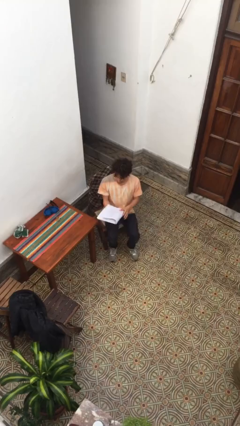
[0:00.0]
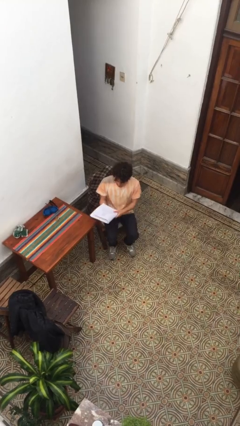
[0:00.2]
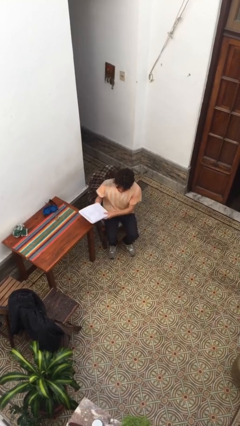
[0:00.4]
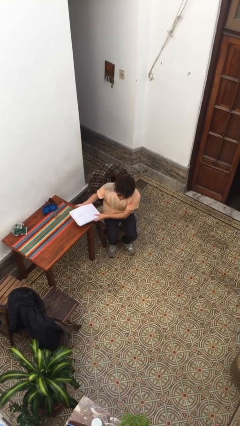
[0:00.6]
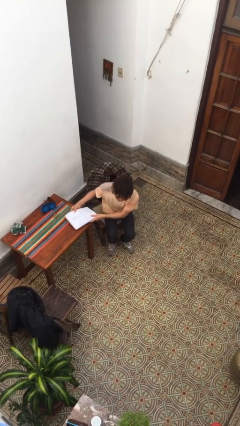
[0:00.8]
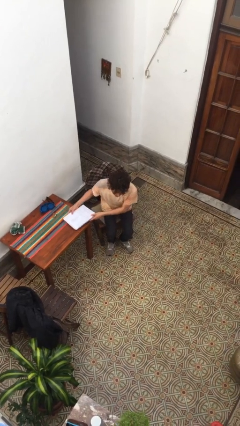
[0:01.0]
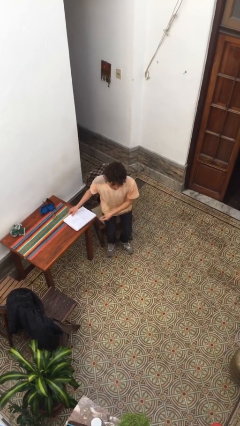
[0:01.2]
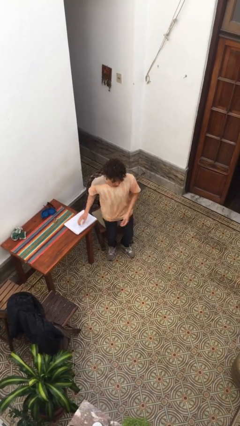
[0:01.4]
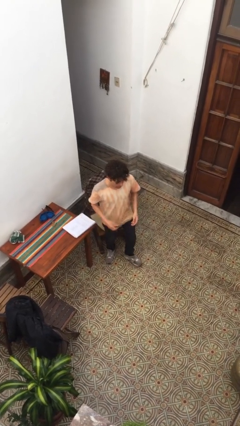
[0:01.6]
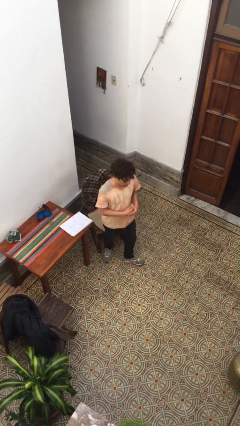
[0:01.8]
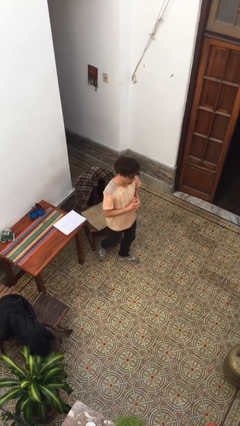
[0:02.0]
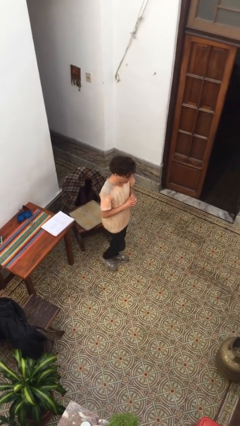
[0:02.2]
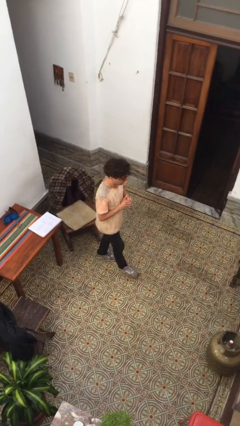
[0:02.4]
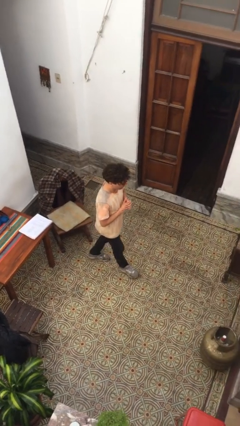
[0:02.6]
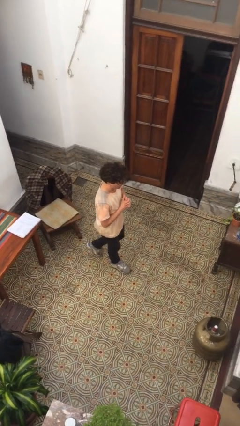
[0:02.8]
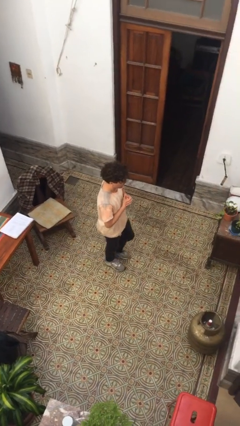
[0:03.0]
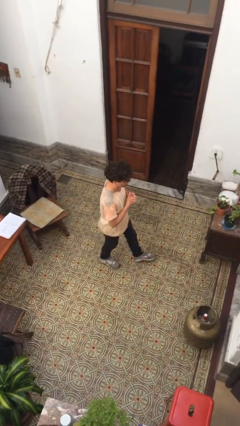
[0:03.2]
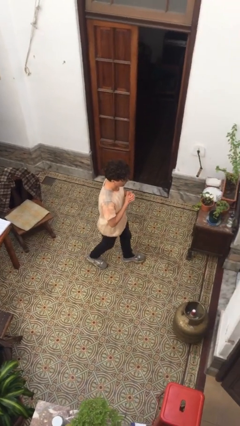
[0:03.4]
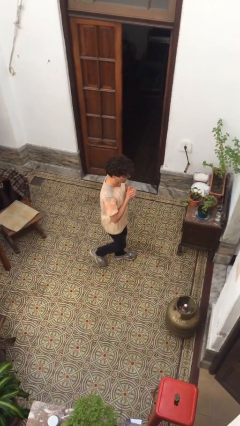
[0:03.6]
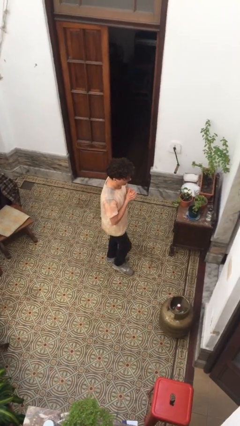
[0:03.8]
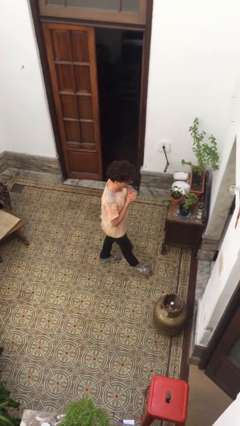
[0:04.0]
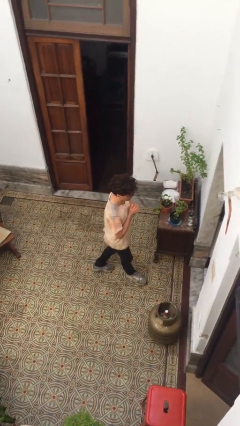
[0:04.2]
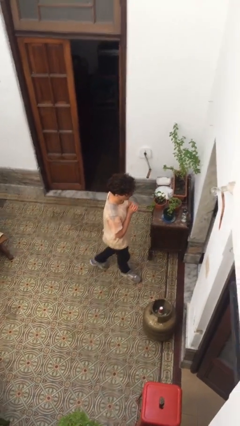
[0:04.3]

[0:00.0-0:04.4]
person stands up

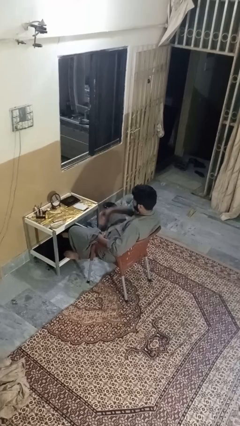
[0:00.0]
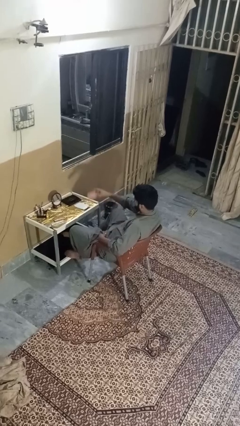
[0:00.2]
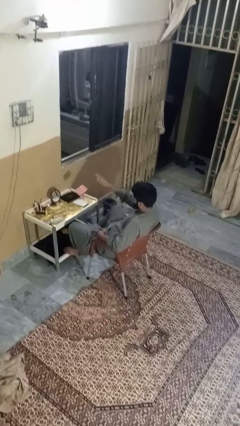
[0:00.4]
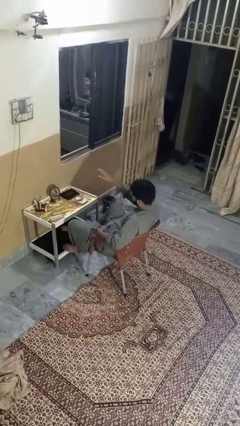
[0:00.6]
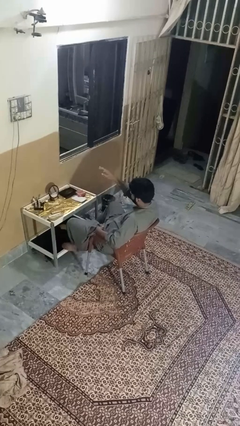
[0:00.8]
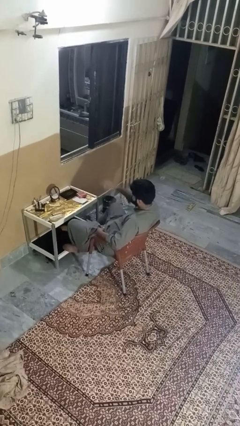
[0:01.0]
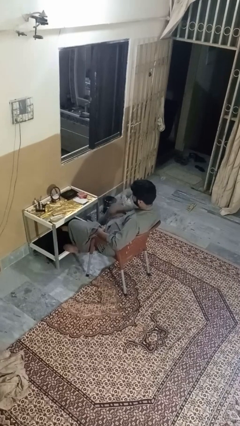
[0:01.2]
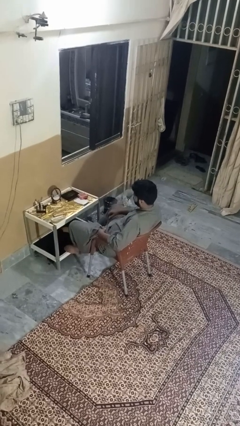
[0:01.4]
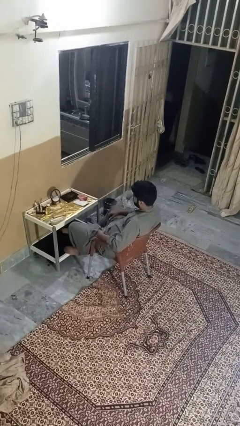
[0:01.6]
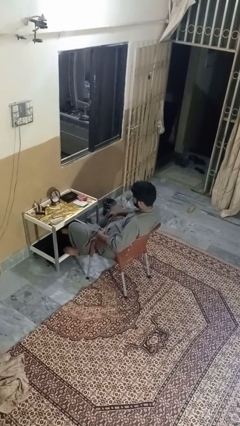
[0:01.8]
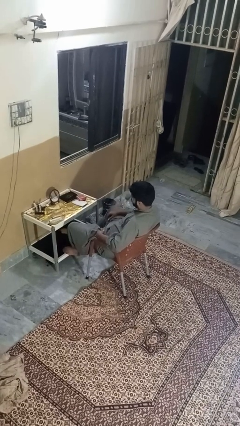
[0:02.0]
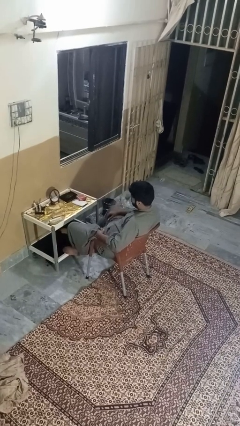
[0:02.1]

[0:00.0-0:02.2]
person throws object on table

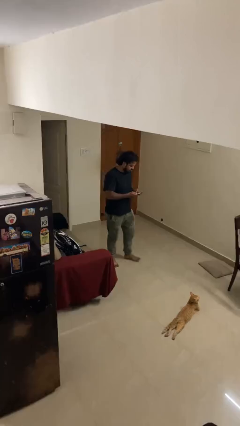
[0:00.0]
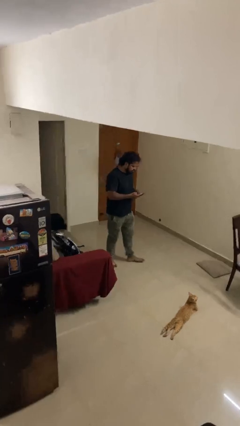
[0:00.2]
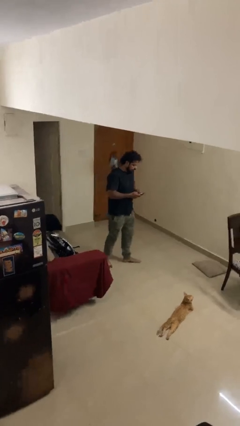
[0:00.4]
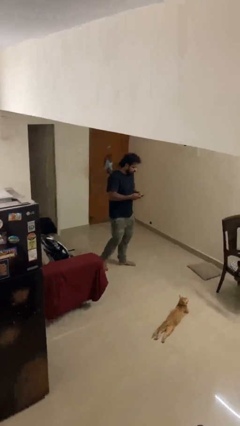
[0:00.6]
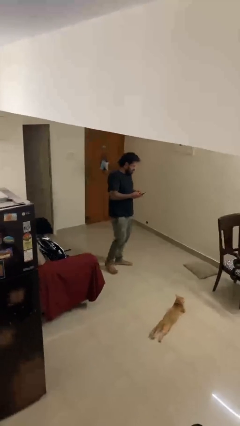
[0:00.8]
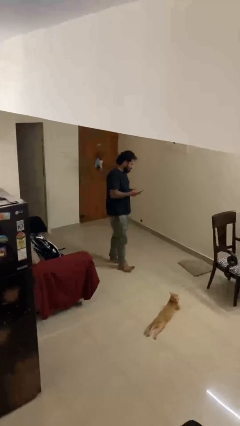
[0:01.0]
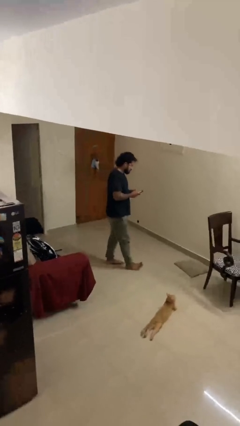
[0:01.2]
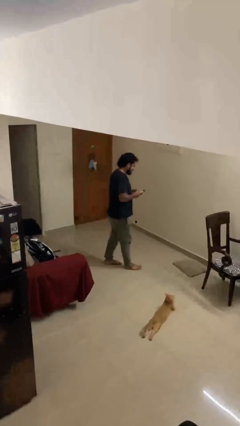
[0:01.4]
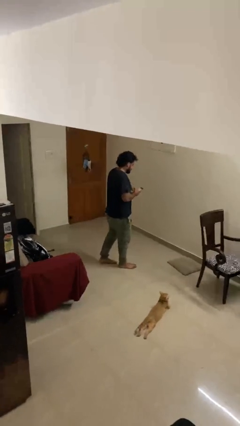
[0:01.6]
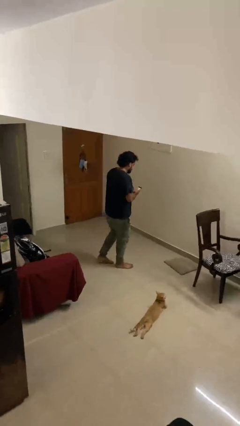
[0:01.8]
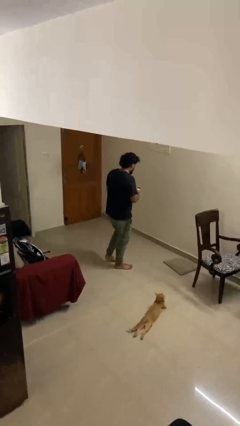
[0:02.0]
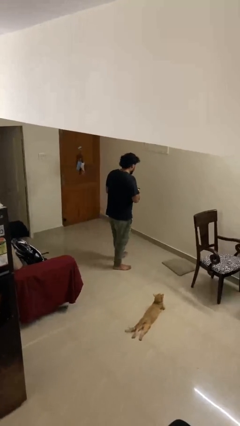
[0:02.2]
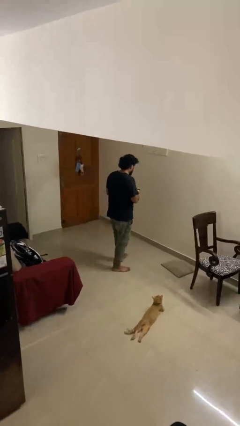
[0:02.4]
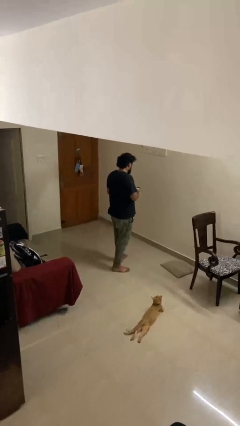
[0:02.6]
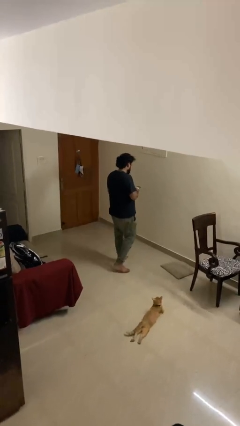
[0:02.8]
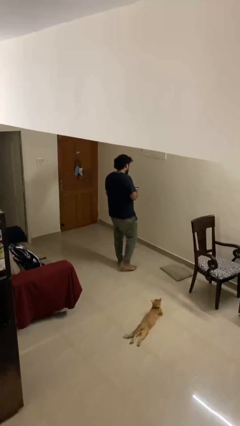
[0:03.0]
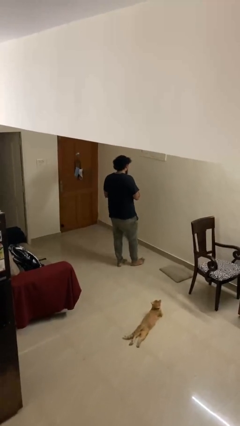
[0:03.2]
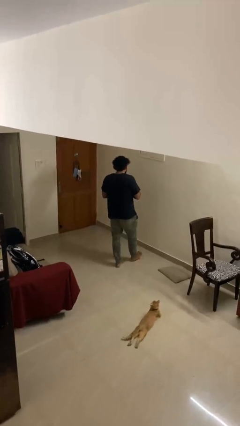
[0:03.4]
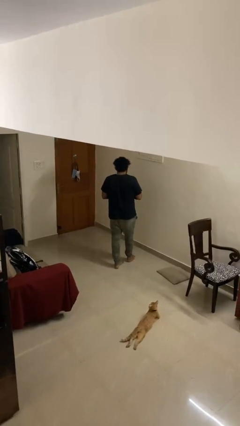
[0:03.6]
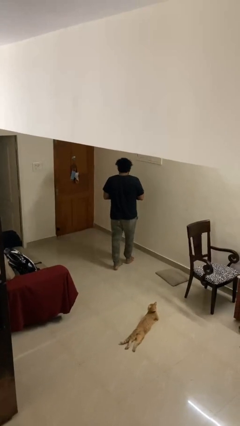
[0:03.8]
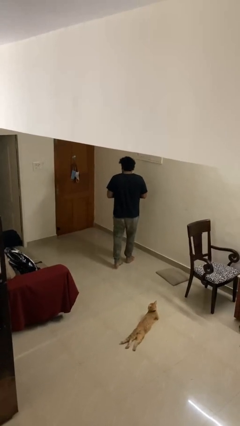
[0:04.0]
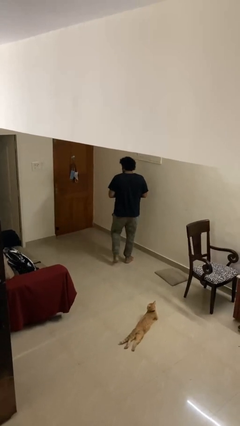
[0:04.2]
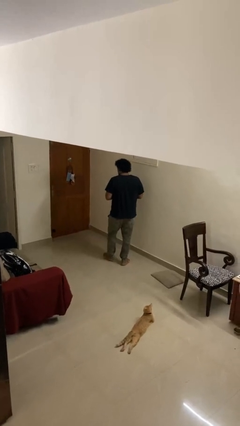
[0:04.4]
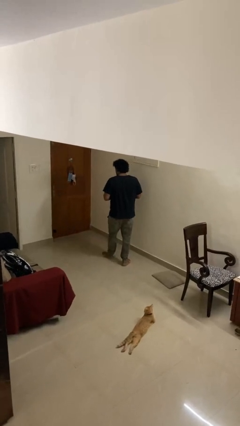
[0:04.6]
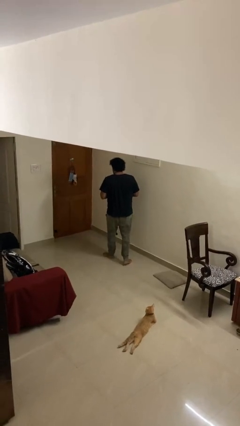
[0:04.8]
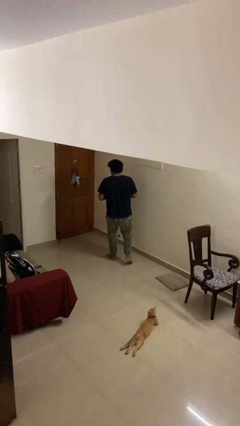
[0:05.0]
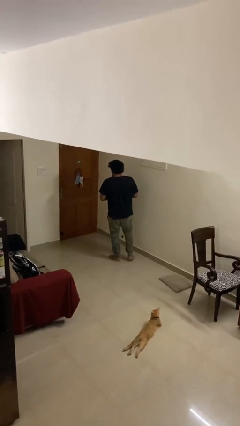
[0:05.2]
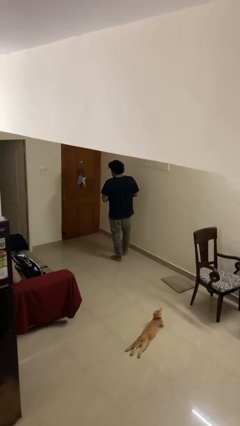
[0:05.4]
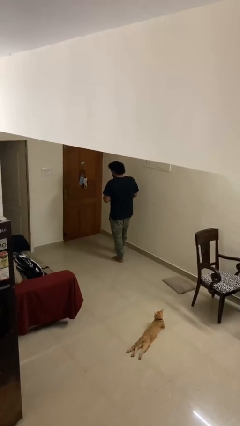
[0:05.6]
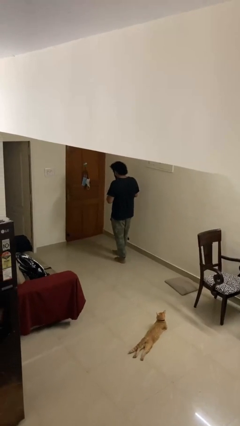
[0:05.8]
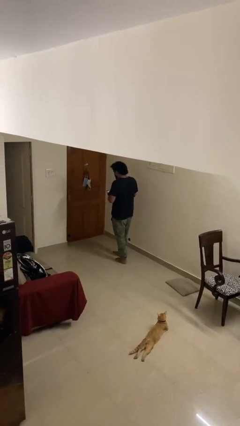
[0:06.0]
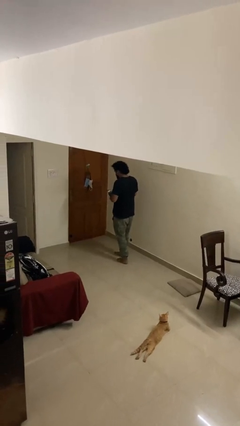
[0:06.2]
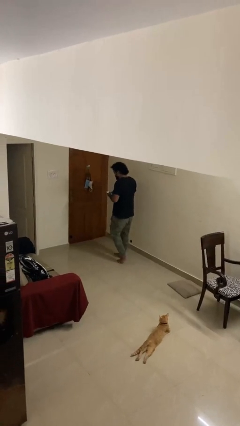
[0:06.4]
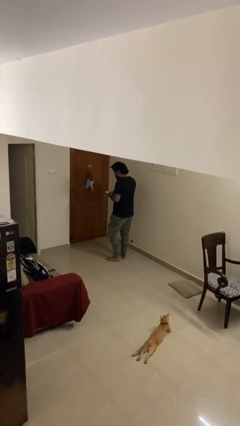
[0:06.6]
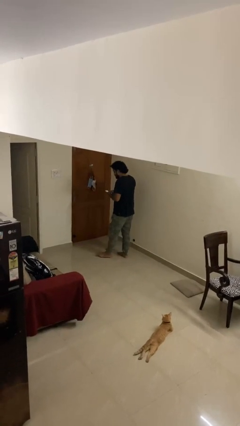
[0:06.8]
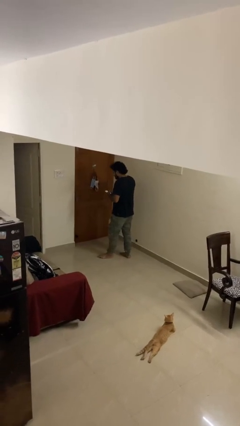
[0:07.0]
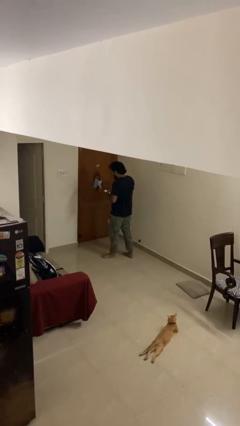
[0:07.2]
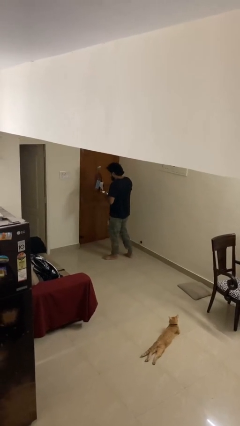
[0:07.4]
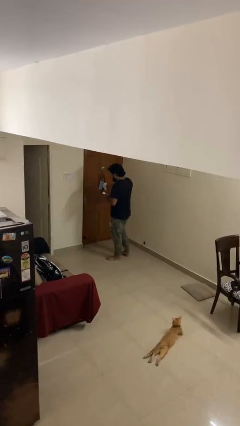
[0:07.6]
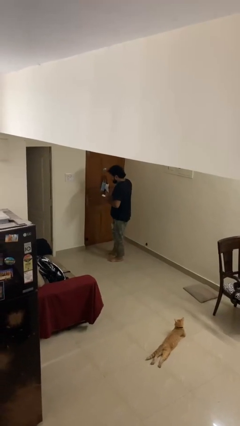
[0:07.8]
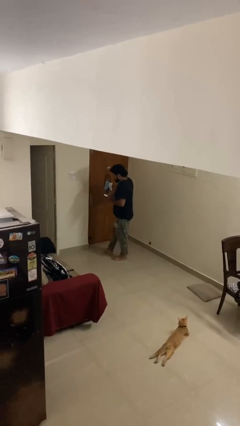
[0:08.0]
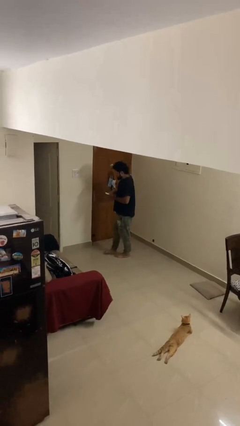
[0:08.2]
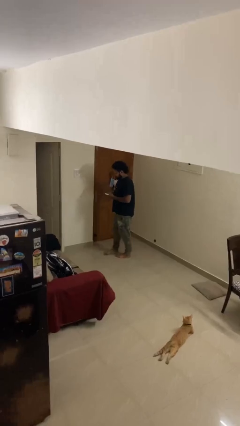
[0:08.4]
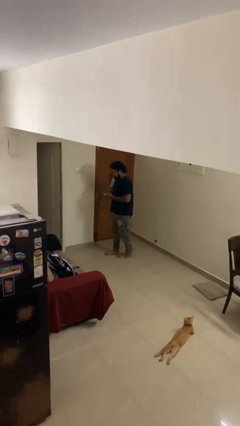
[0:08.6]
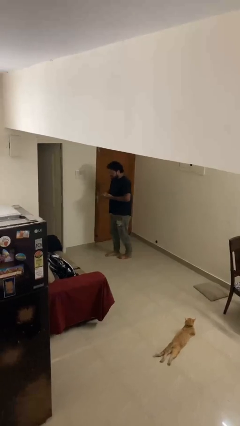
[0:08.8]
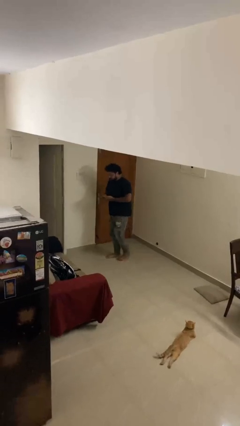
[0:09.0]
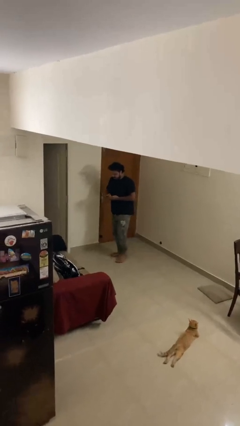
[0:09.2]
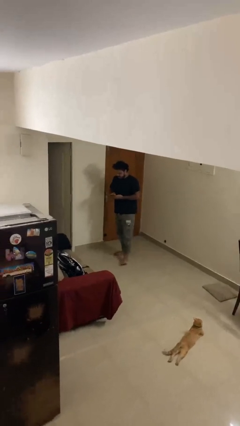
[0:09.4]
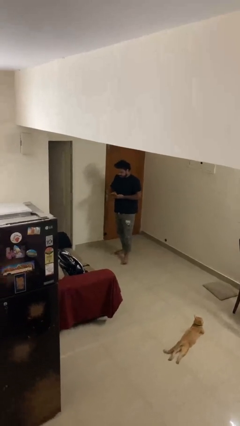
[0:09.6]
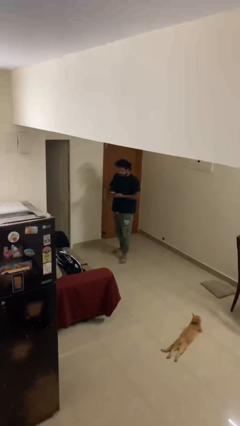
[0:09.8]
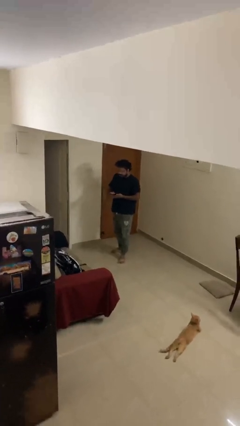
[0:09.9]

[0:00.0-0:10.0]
person texts on phone

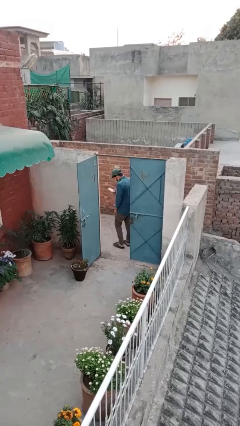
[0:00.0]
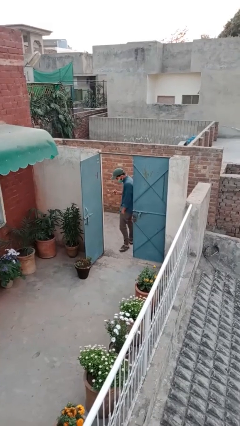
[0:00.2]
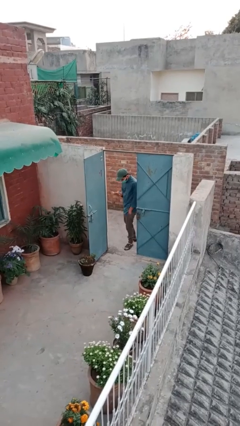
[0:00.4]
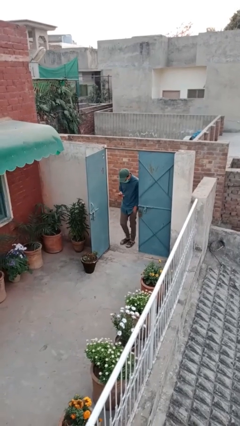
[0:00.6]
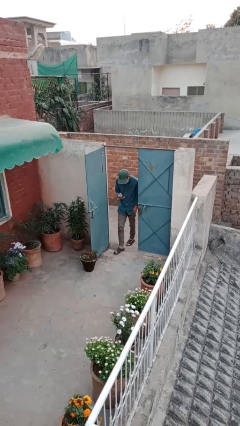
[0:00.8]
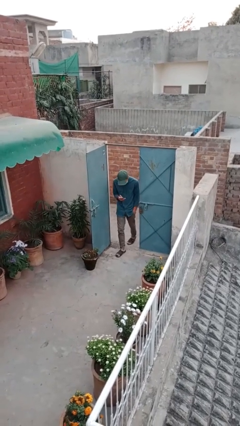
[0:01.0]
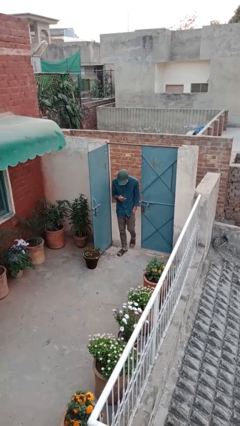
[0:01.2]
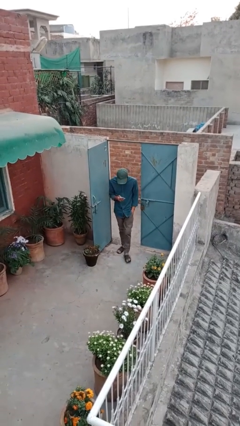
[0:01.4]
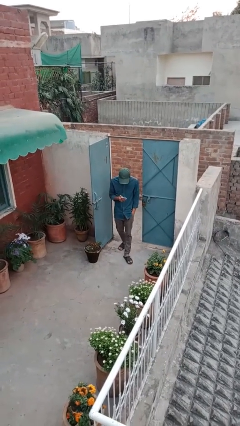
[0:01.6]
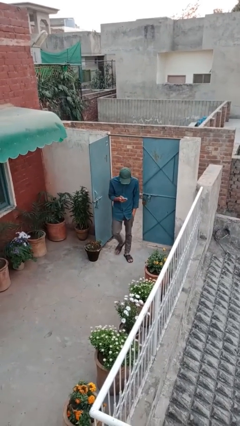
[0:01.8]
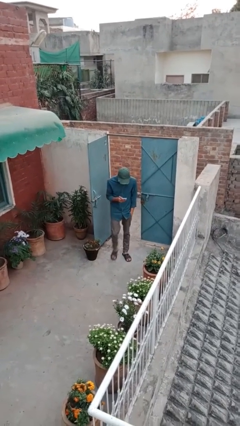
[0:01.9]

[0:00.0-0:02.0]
person enters scene through structure
